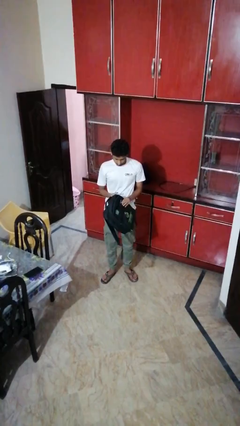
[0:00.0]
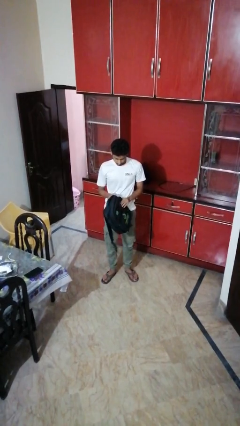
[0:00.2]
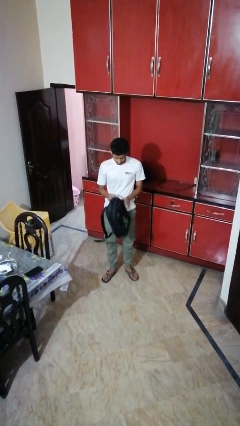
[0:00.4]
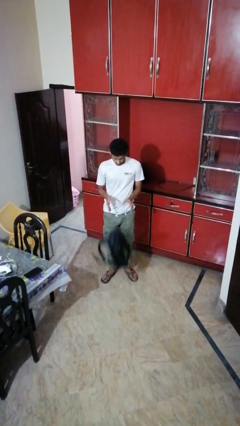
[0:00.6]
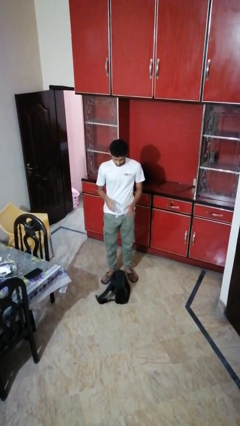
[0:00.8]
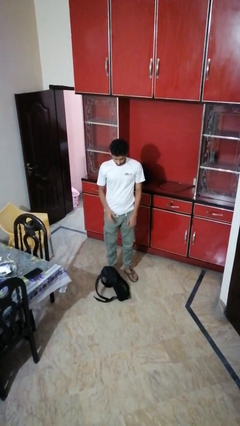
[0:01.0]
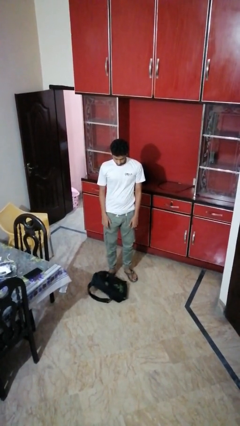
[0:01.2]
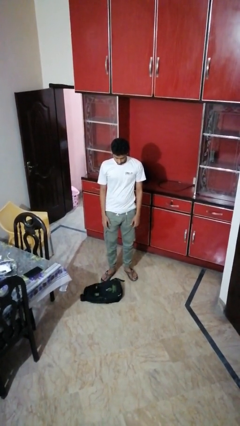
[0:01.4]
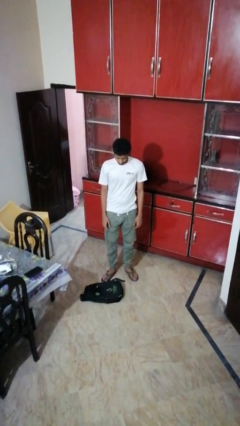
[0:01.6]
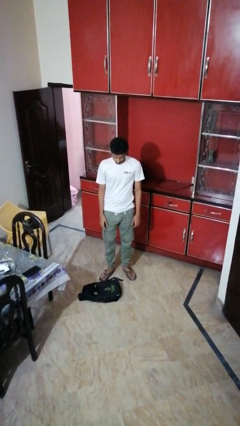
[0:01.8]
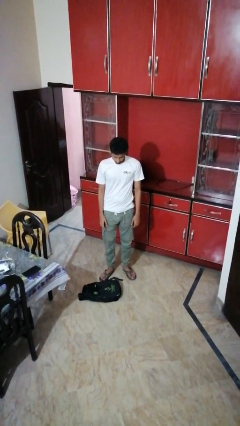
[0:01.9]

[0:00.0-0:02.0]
person drops object

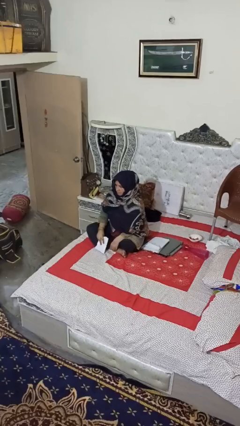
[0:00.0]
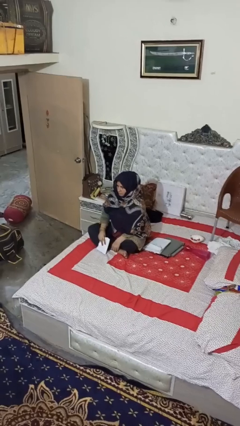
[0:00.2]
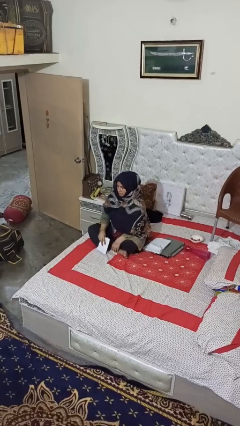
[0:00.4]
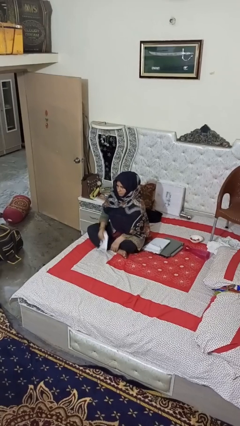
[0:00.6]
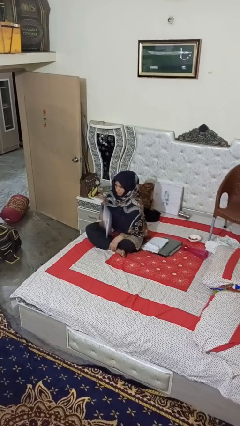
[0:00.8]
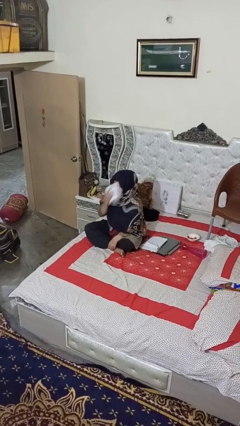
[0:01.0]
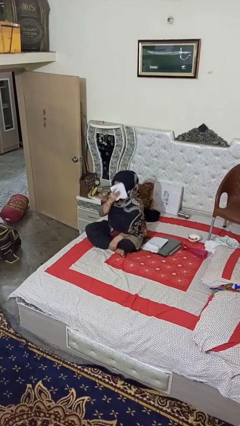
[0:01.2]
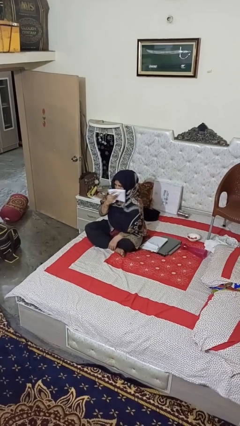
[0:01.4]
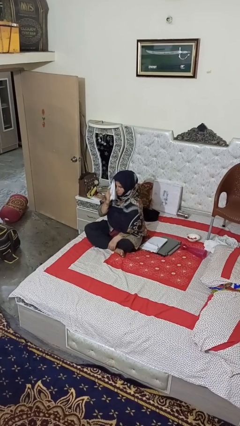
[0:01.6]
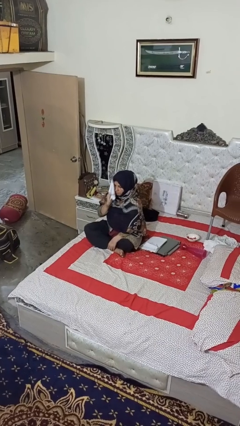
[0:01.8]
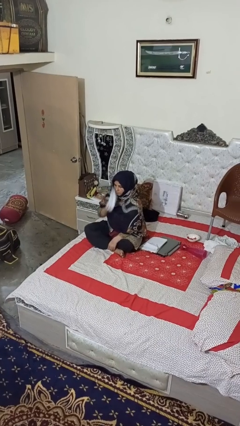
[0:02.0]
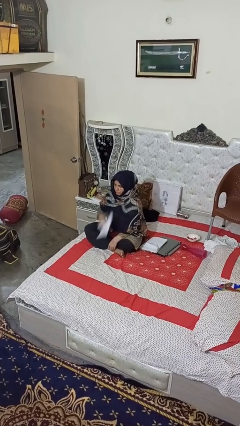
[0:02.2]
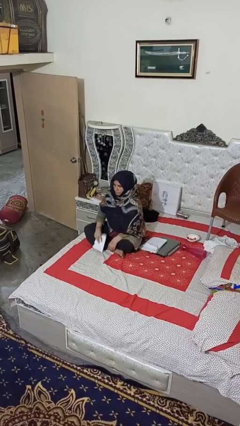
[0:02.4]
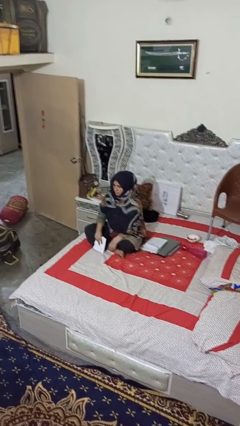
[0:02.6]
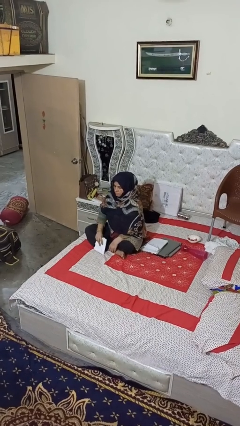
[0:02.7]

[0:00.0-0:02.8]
person wipes mouth with napkin

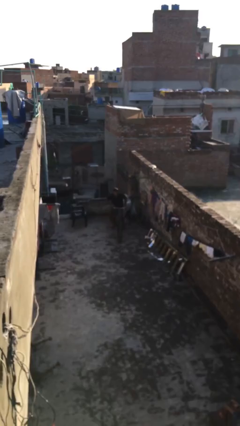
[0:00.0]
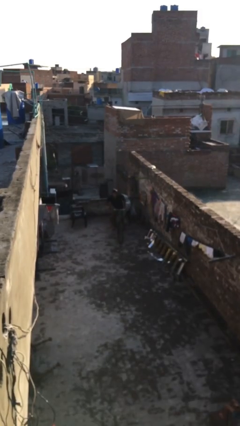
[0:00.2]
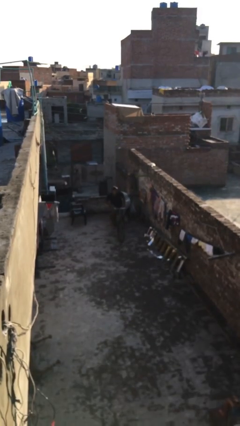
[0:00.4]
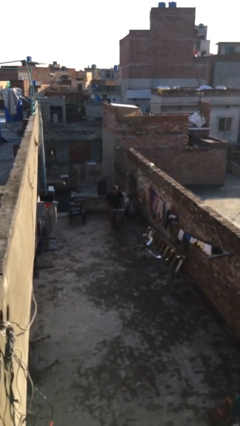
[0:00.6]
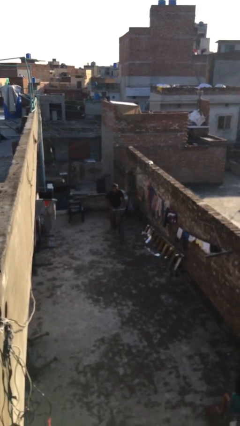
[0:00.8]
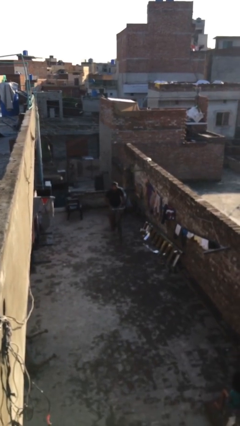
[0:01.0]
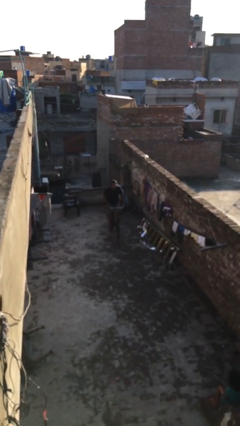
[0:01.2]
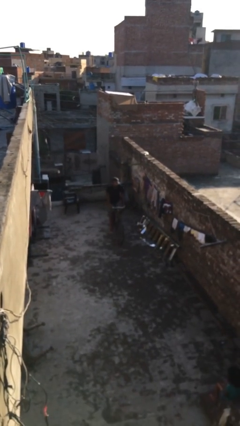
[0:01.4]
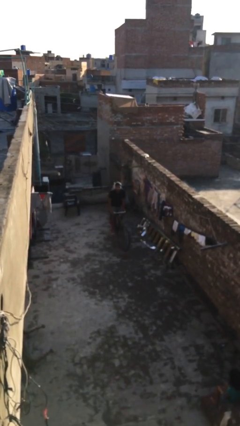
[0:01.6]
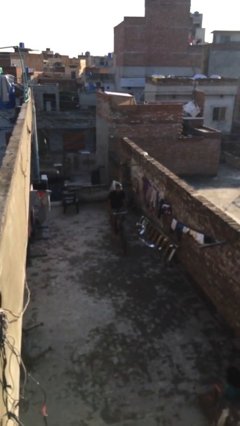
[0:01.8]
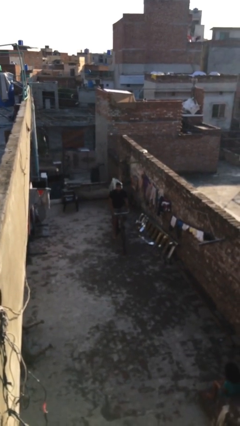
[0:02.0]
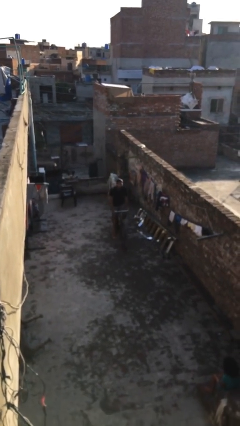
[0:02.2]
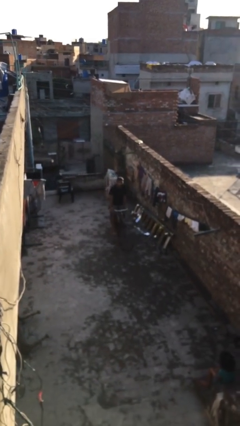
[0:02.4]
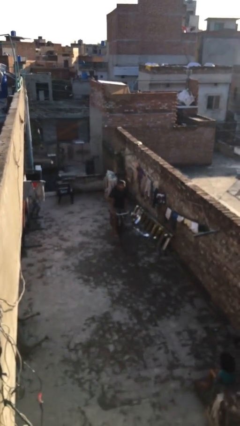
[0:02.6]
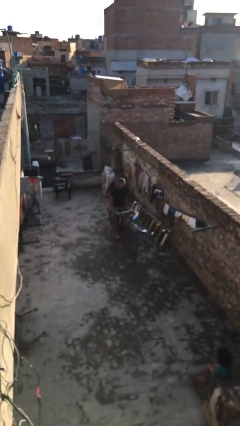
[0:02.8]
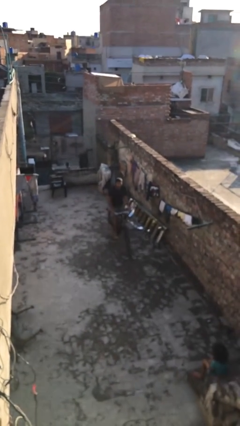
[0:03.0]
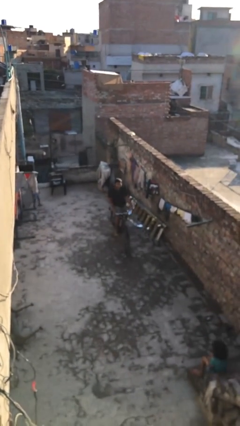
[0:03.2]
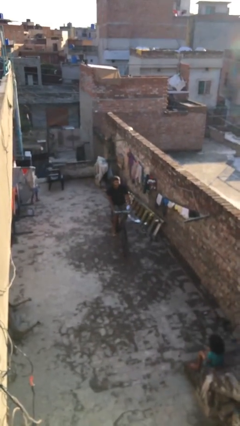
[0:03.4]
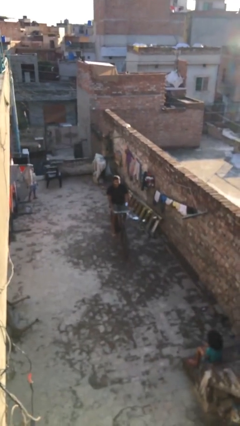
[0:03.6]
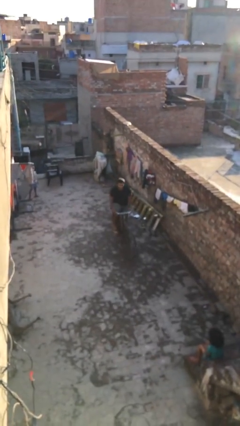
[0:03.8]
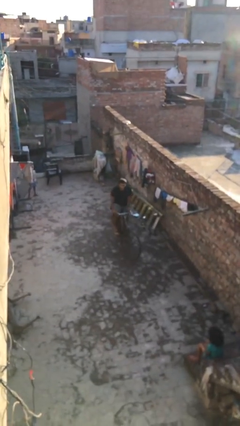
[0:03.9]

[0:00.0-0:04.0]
person rides bicycle

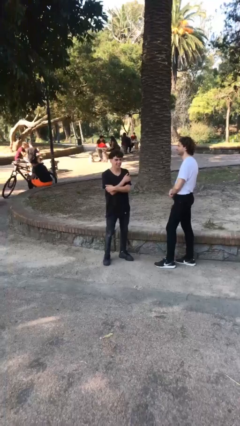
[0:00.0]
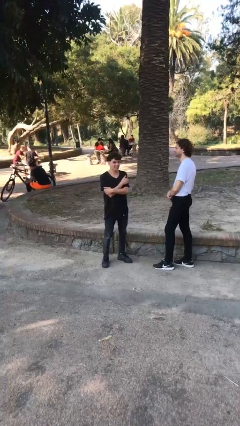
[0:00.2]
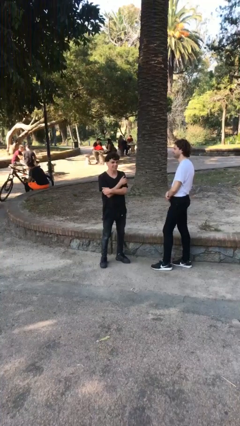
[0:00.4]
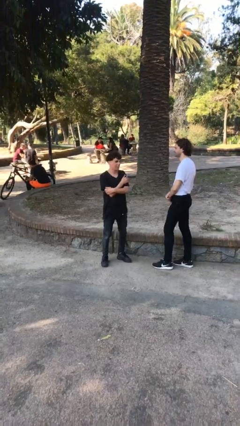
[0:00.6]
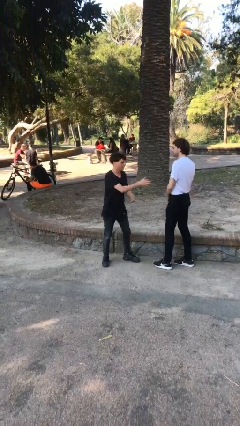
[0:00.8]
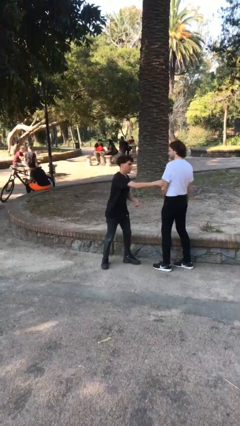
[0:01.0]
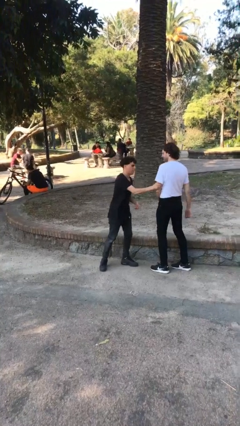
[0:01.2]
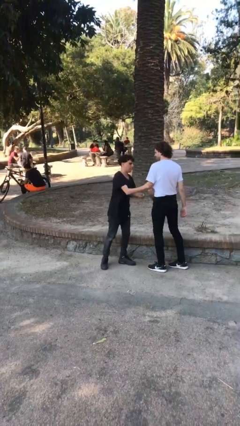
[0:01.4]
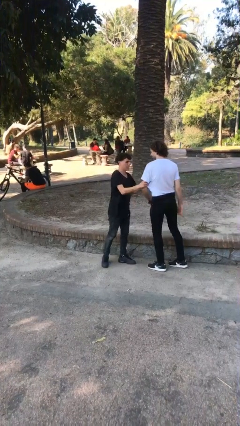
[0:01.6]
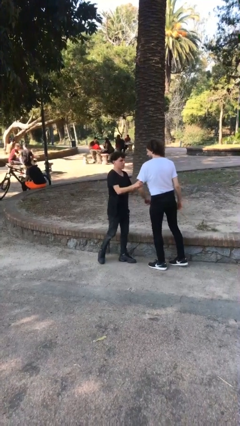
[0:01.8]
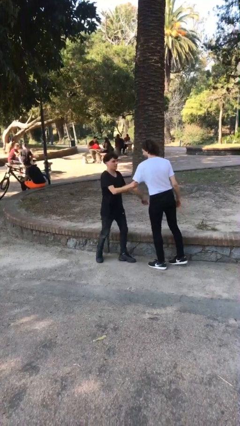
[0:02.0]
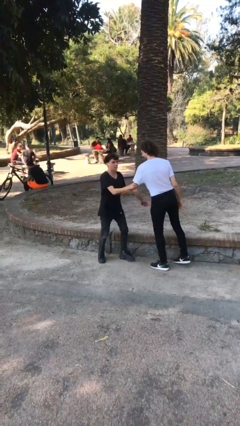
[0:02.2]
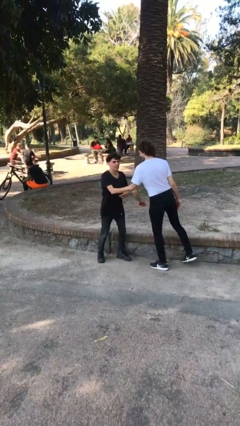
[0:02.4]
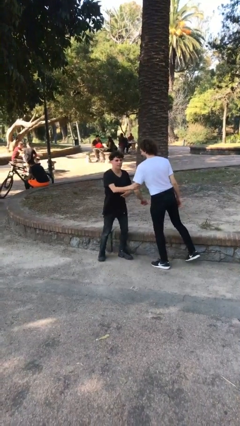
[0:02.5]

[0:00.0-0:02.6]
person grabs person by bicep

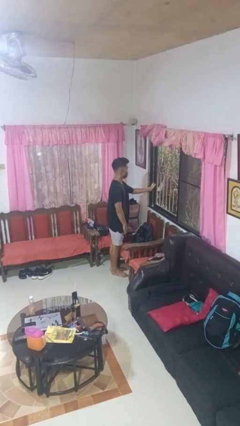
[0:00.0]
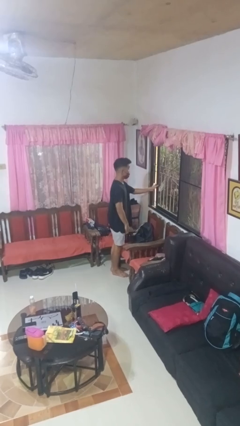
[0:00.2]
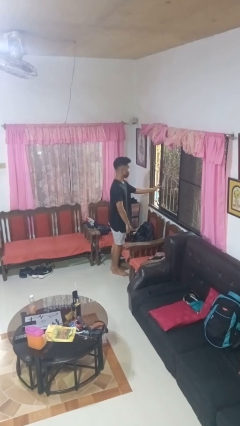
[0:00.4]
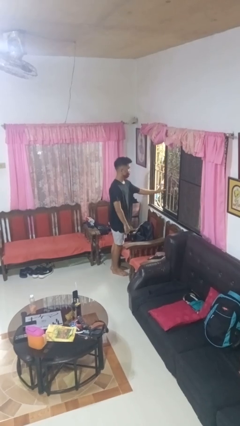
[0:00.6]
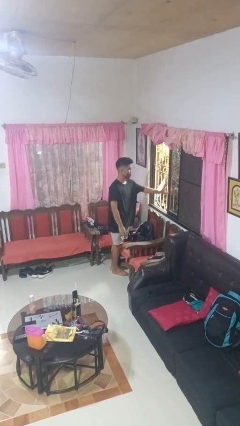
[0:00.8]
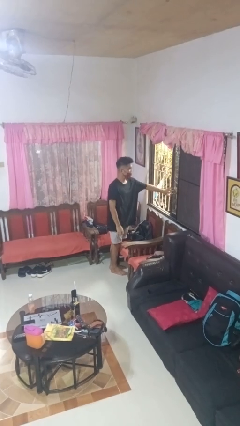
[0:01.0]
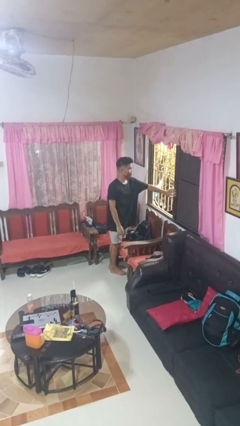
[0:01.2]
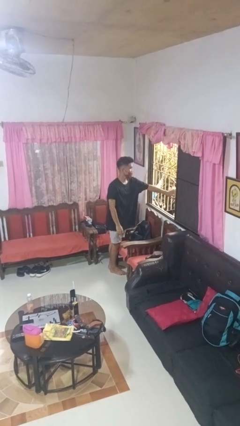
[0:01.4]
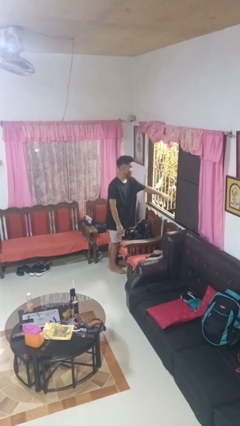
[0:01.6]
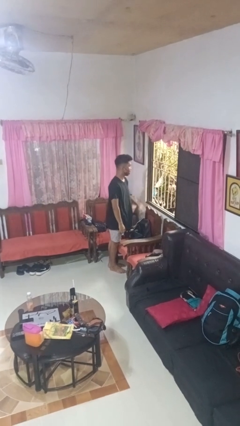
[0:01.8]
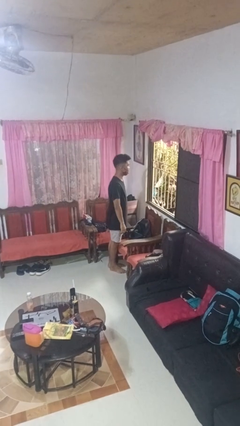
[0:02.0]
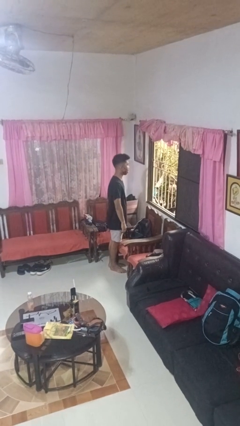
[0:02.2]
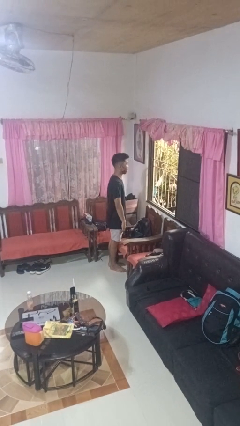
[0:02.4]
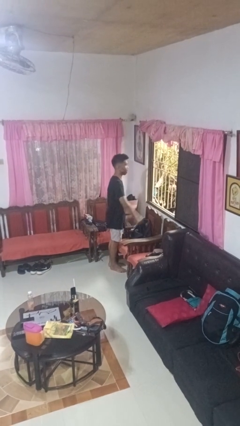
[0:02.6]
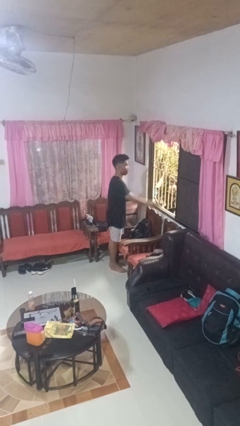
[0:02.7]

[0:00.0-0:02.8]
person opens home window

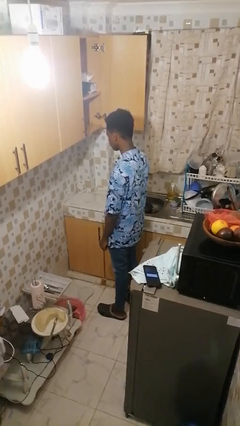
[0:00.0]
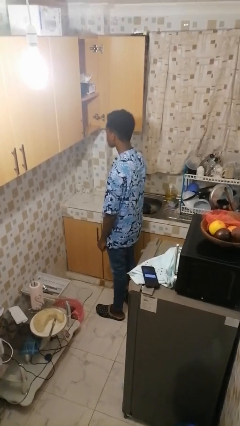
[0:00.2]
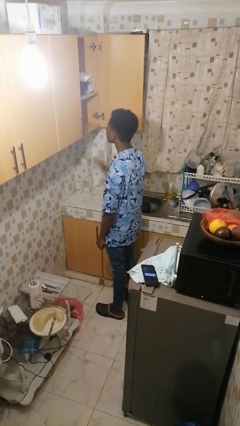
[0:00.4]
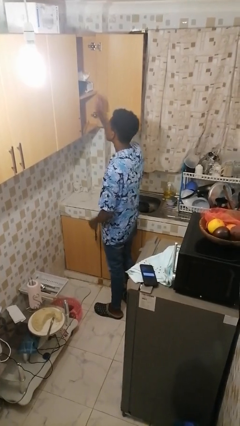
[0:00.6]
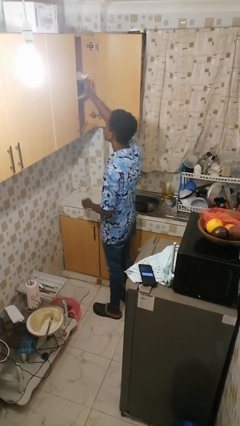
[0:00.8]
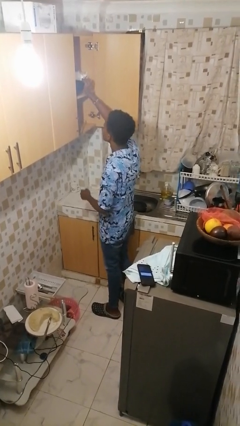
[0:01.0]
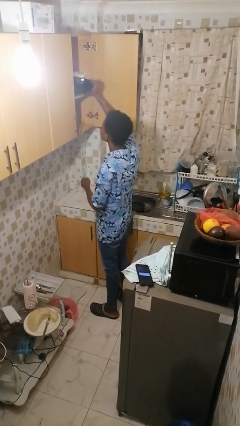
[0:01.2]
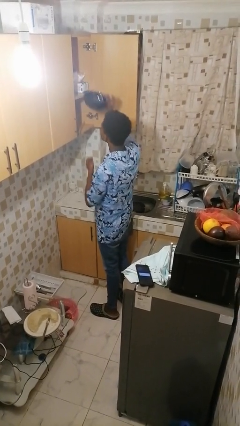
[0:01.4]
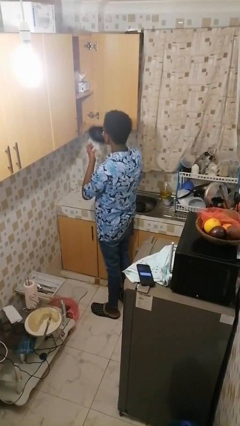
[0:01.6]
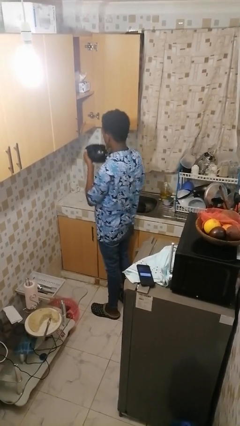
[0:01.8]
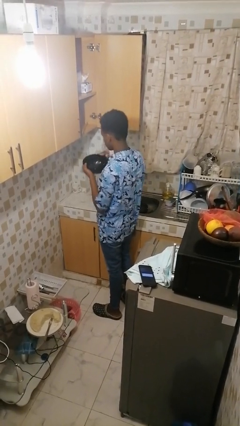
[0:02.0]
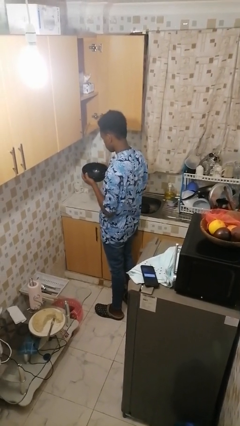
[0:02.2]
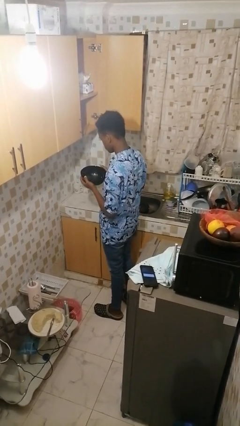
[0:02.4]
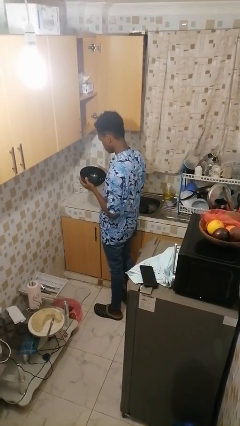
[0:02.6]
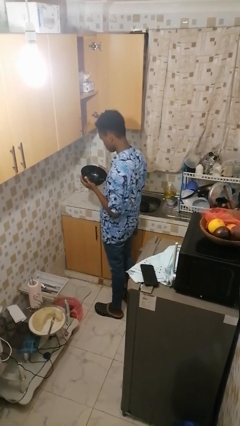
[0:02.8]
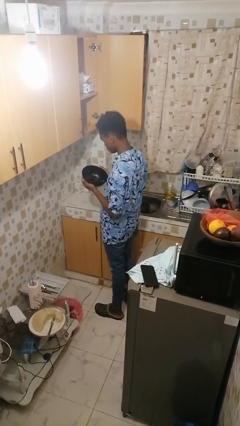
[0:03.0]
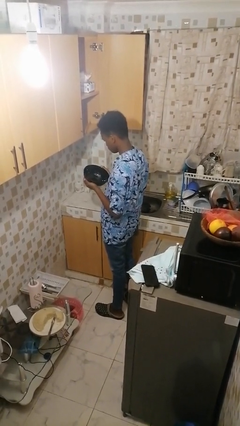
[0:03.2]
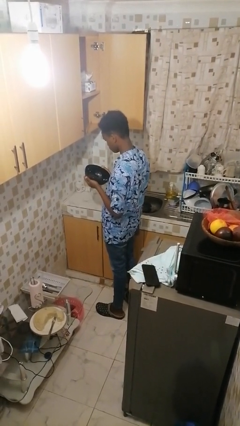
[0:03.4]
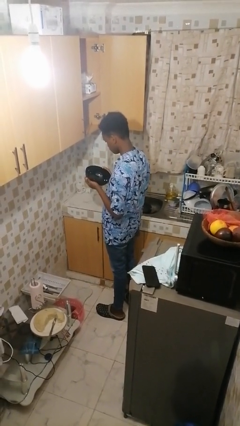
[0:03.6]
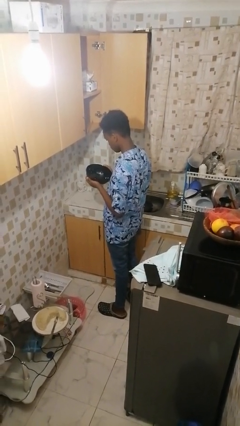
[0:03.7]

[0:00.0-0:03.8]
person picks up object from cabinet
